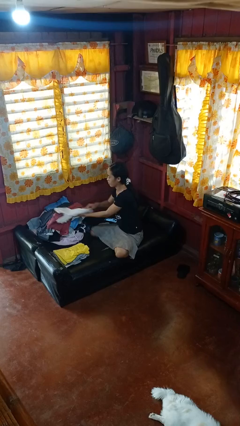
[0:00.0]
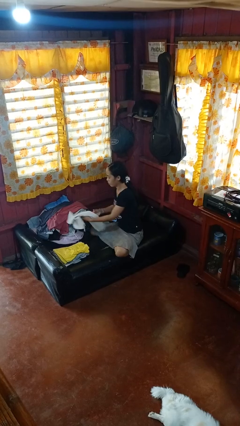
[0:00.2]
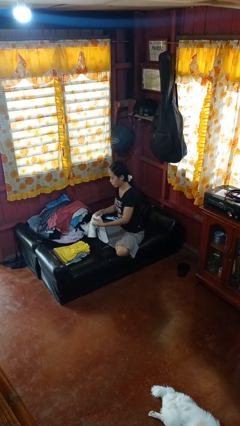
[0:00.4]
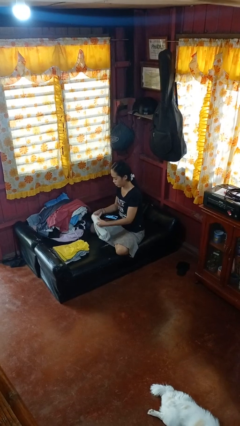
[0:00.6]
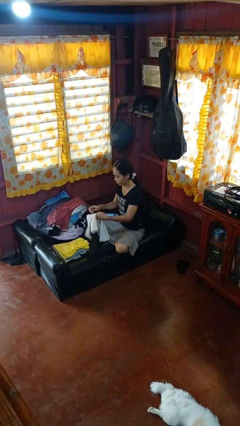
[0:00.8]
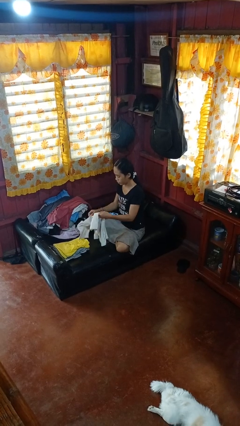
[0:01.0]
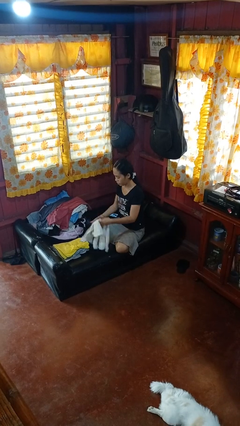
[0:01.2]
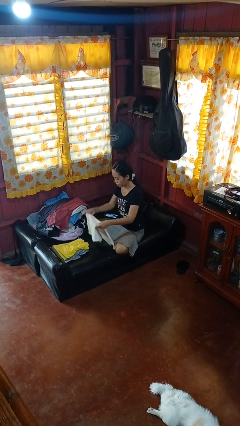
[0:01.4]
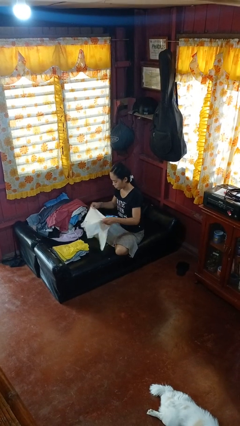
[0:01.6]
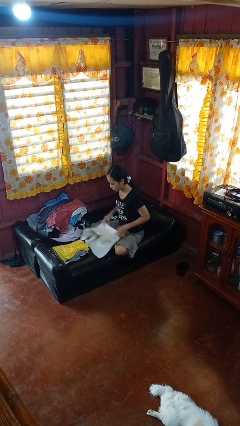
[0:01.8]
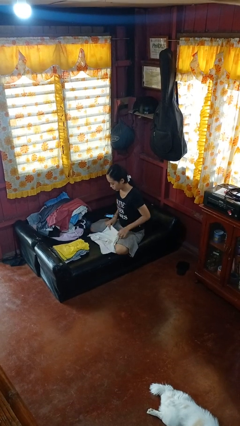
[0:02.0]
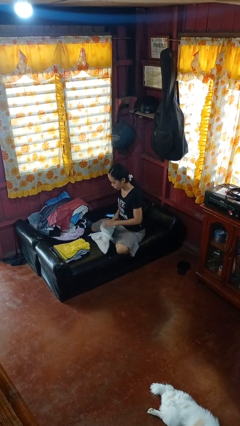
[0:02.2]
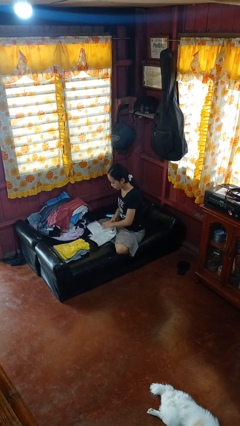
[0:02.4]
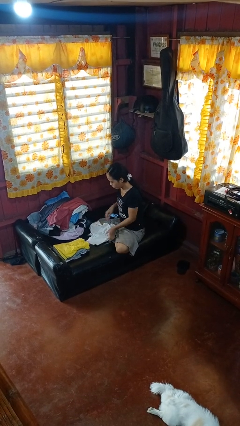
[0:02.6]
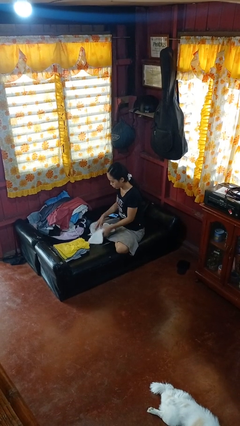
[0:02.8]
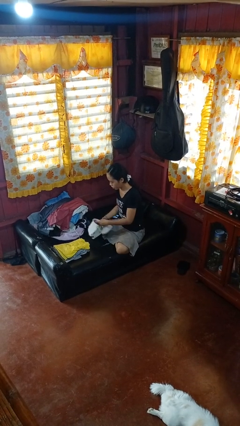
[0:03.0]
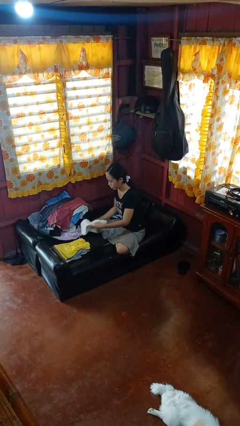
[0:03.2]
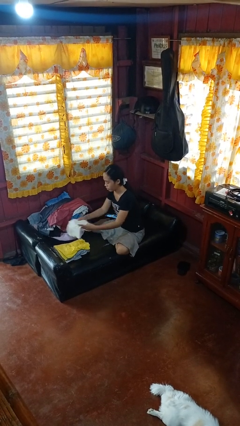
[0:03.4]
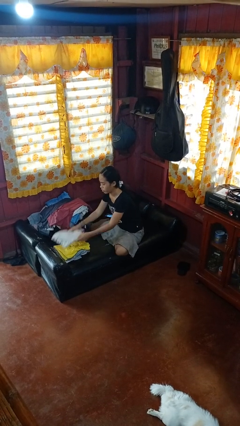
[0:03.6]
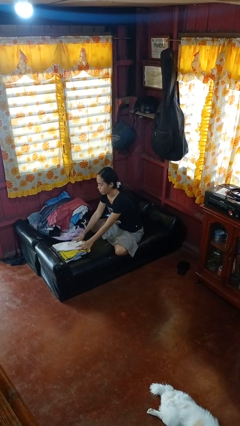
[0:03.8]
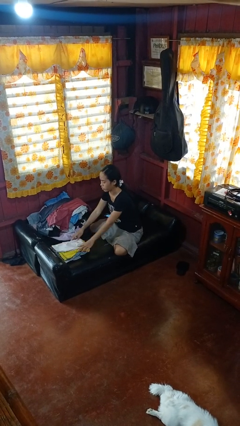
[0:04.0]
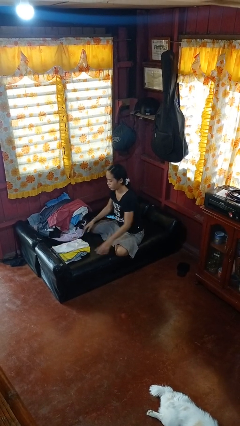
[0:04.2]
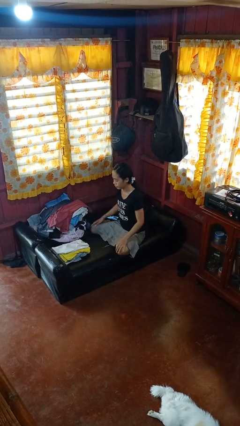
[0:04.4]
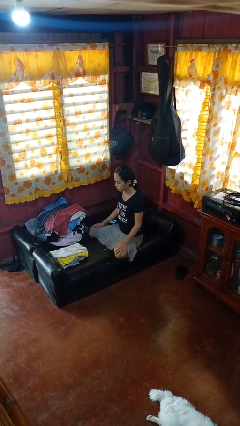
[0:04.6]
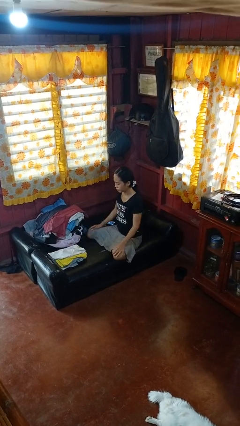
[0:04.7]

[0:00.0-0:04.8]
person folds shirt

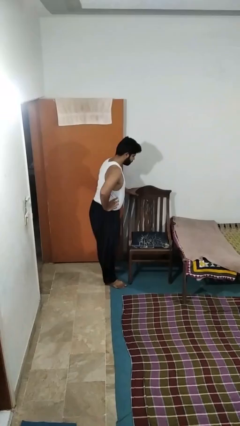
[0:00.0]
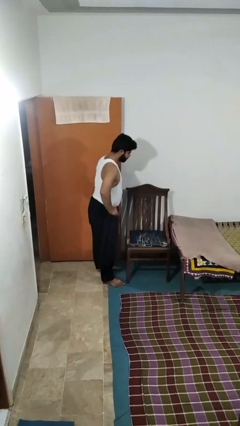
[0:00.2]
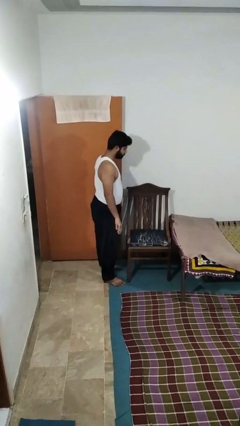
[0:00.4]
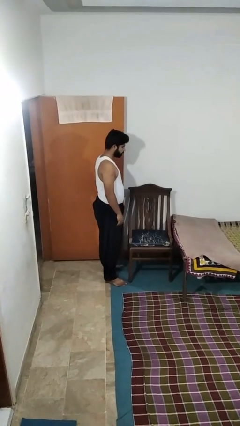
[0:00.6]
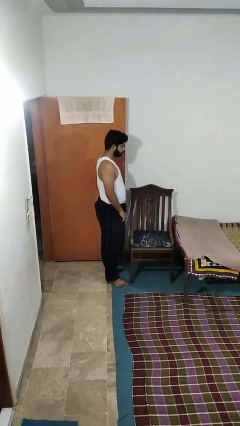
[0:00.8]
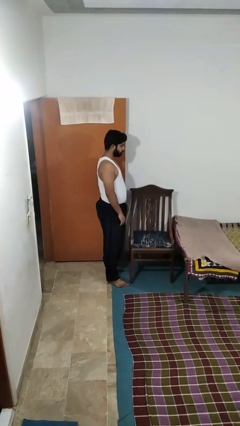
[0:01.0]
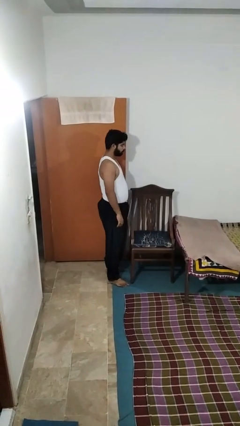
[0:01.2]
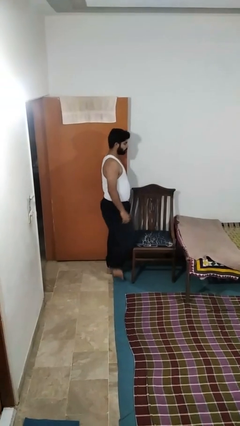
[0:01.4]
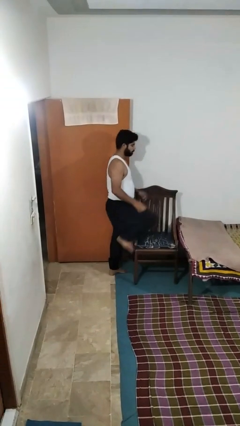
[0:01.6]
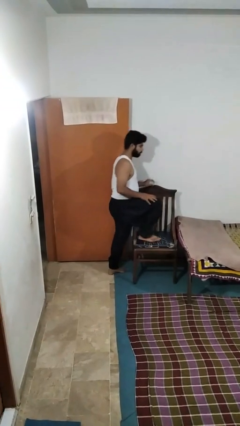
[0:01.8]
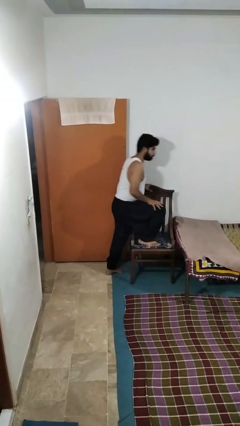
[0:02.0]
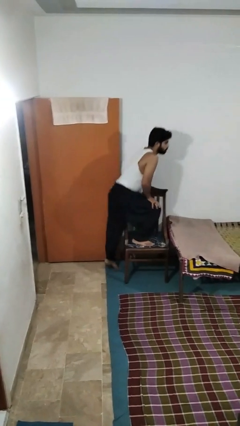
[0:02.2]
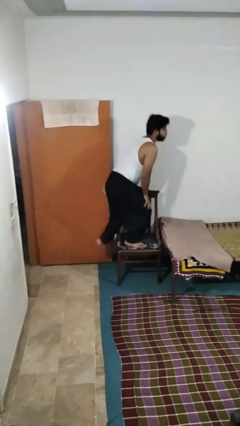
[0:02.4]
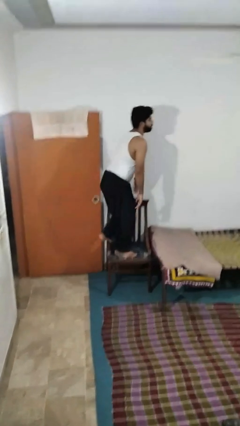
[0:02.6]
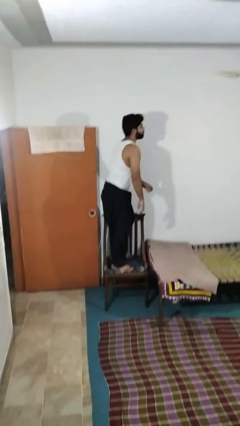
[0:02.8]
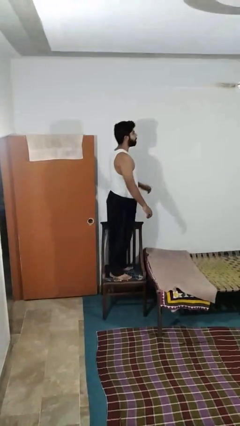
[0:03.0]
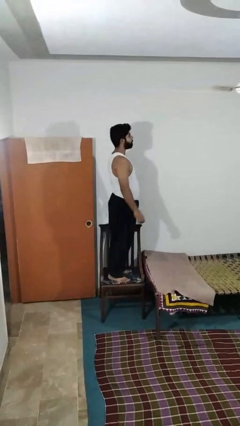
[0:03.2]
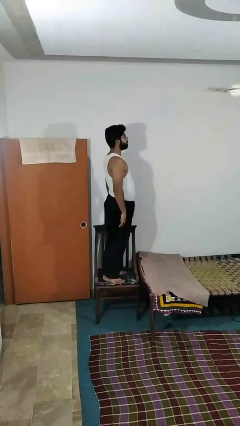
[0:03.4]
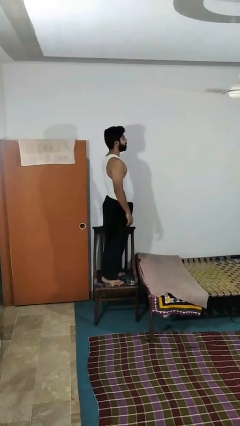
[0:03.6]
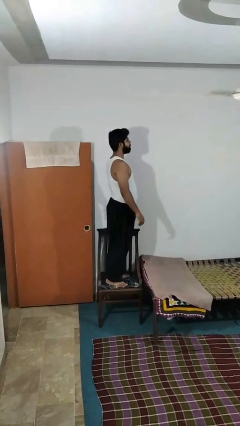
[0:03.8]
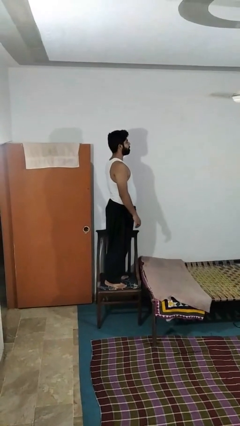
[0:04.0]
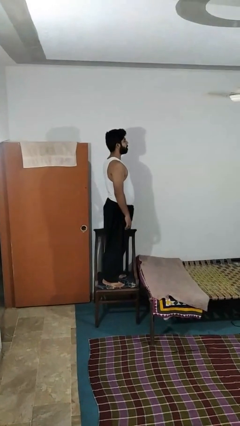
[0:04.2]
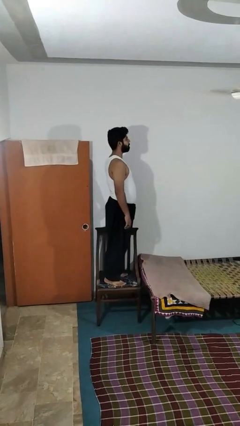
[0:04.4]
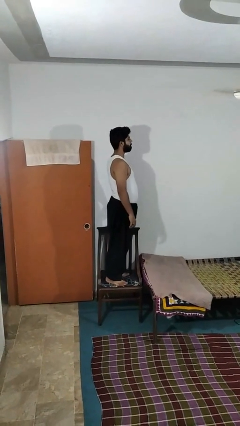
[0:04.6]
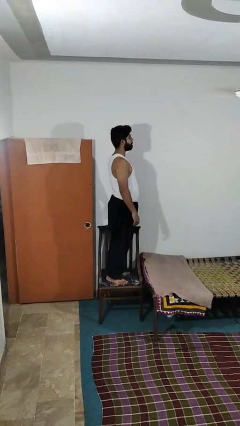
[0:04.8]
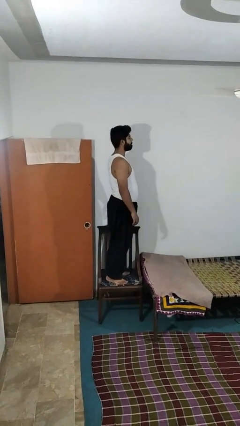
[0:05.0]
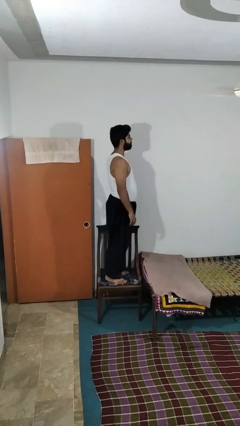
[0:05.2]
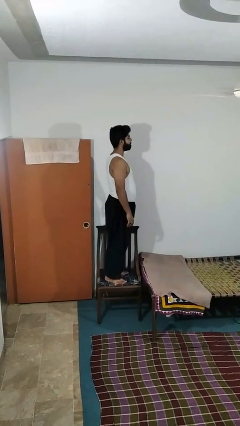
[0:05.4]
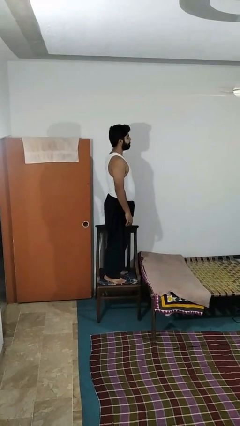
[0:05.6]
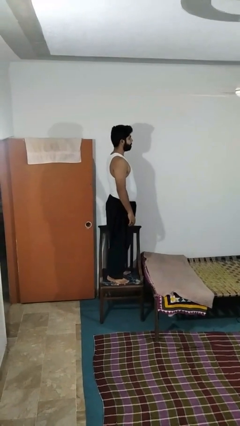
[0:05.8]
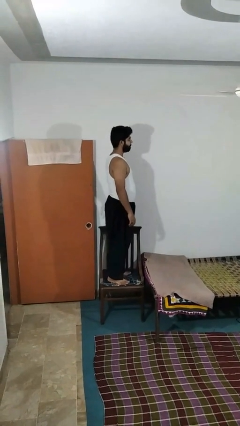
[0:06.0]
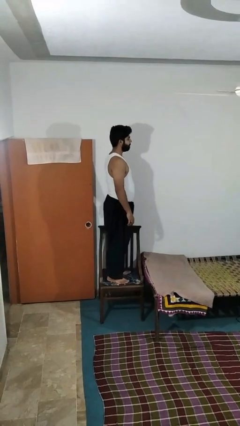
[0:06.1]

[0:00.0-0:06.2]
person climbs on chair

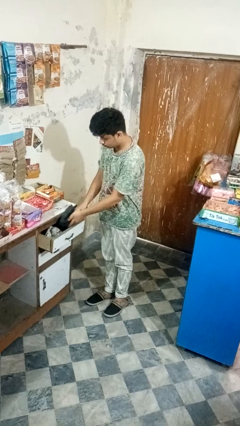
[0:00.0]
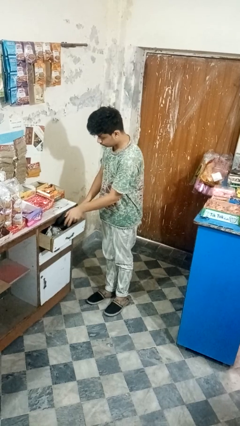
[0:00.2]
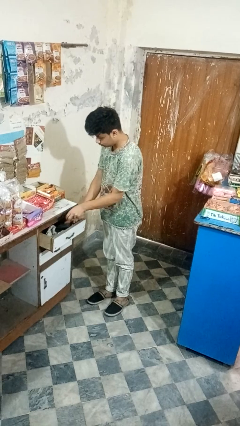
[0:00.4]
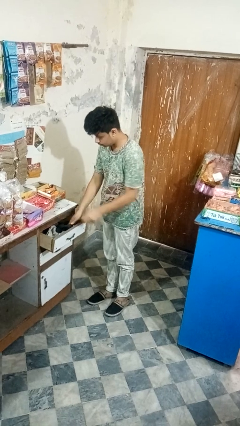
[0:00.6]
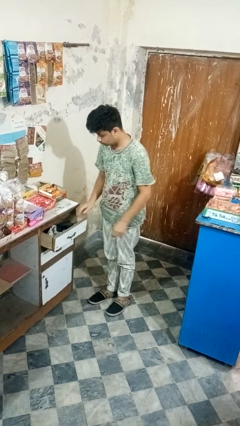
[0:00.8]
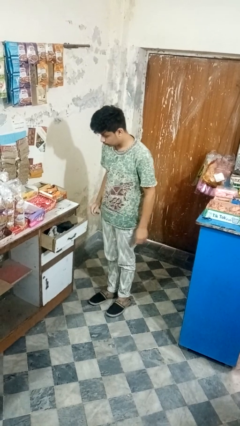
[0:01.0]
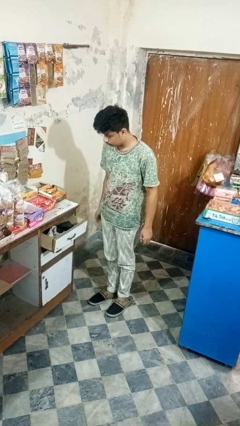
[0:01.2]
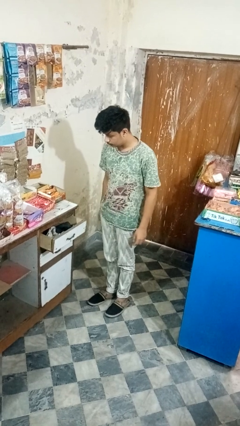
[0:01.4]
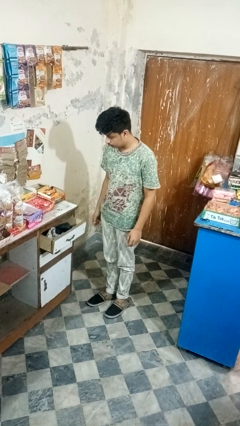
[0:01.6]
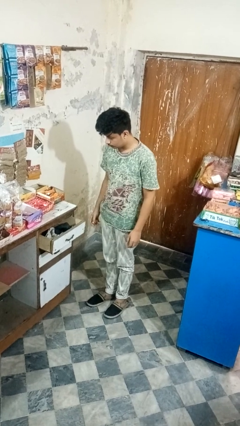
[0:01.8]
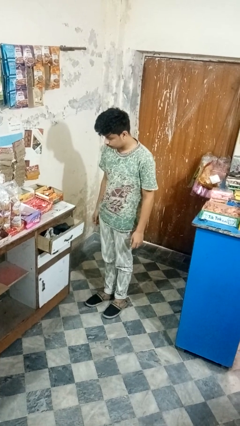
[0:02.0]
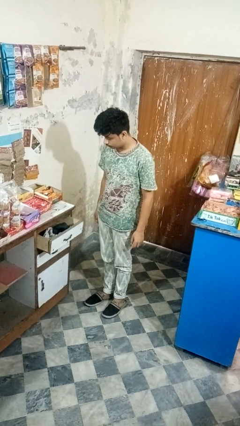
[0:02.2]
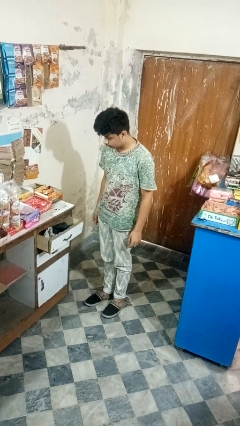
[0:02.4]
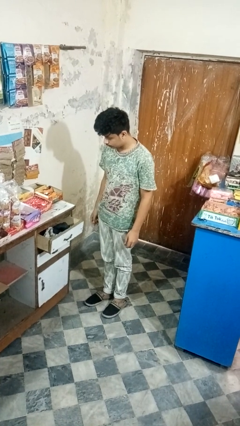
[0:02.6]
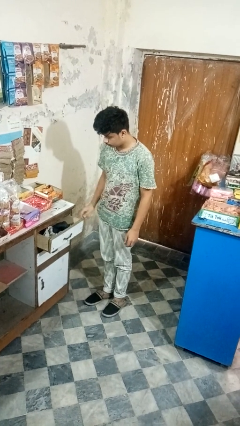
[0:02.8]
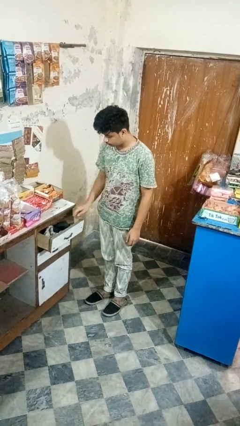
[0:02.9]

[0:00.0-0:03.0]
person puts clothes into dresser

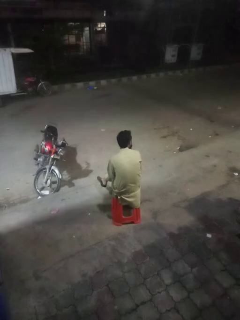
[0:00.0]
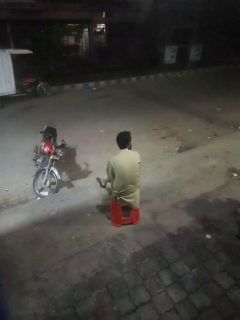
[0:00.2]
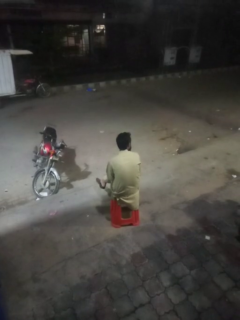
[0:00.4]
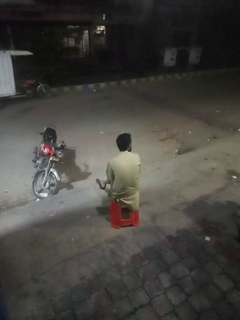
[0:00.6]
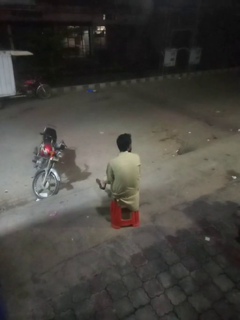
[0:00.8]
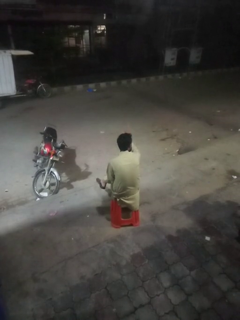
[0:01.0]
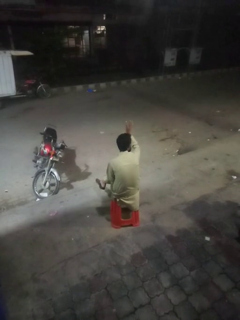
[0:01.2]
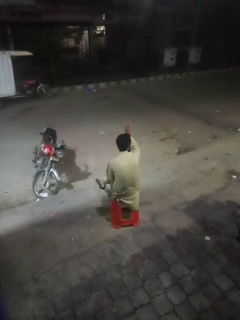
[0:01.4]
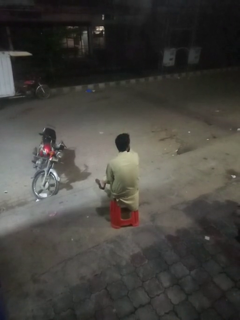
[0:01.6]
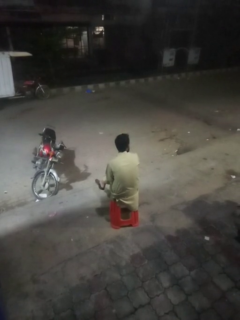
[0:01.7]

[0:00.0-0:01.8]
person gestures number four

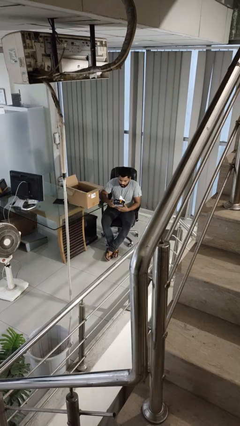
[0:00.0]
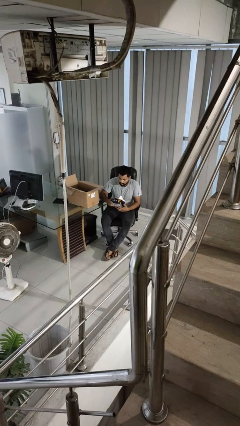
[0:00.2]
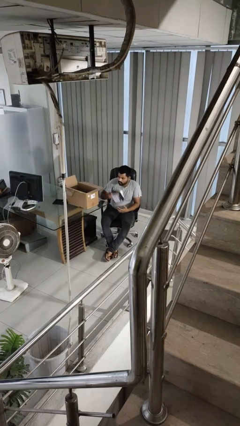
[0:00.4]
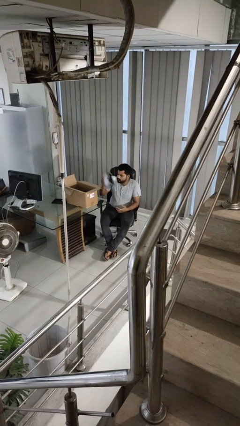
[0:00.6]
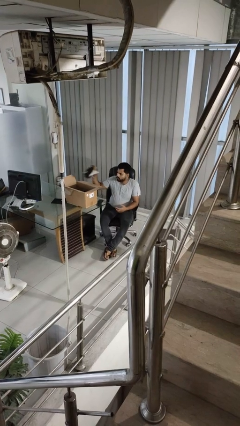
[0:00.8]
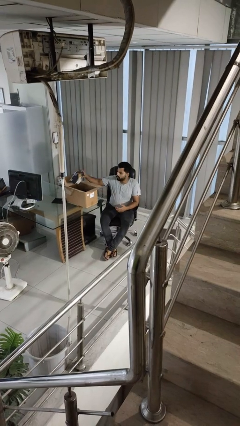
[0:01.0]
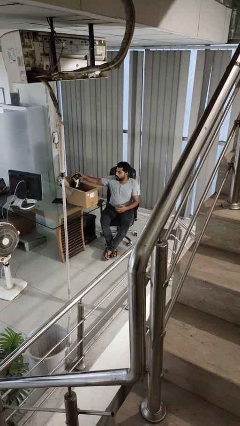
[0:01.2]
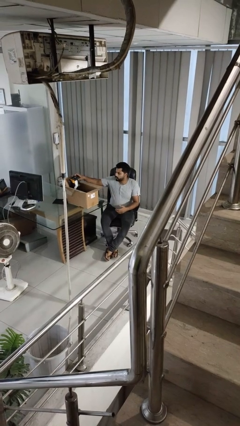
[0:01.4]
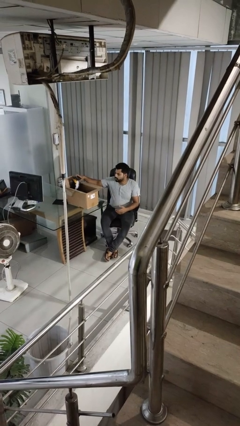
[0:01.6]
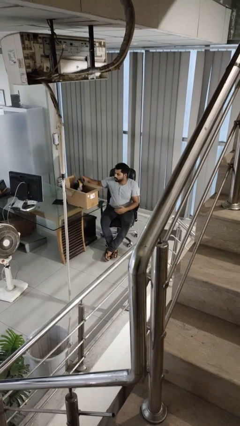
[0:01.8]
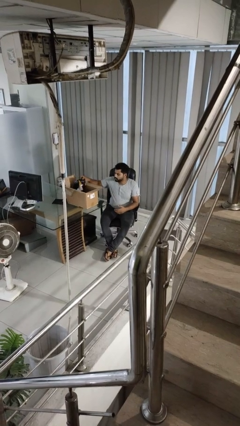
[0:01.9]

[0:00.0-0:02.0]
person puts object into box
